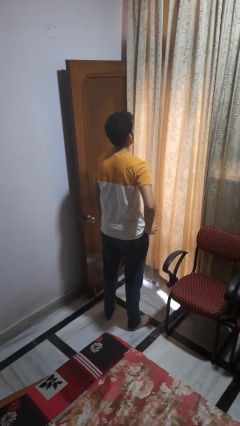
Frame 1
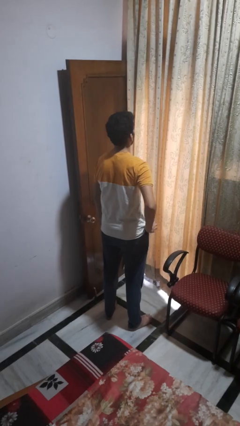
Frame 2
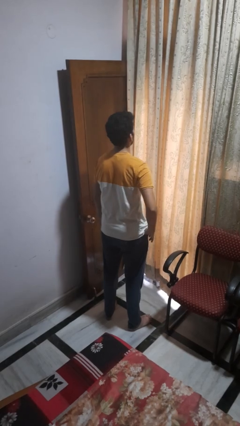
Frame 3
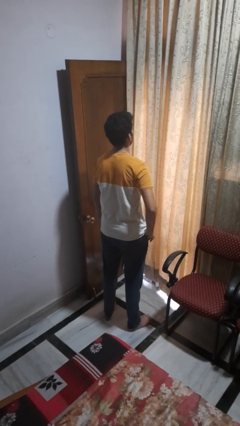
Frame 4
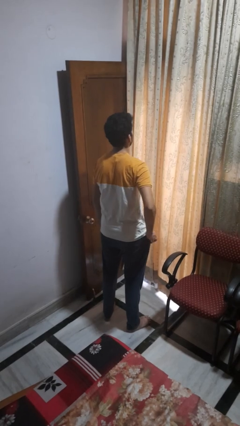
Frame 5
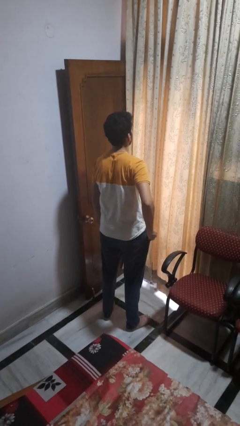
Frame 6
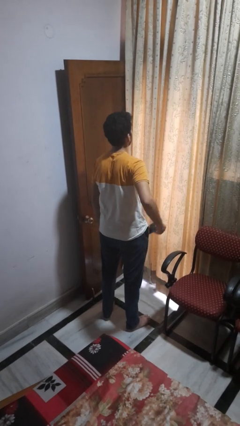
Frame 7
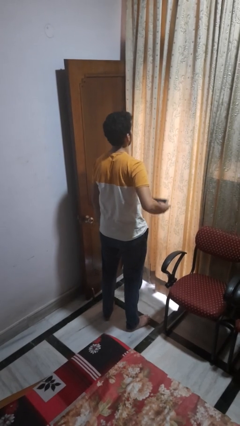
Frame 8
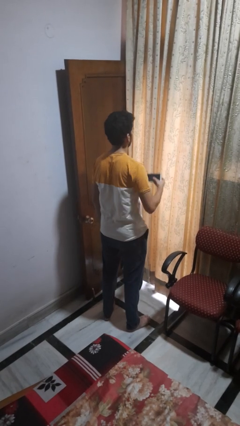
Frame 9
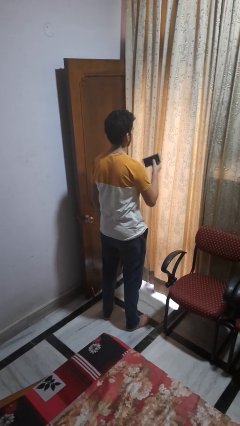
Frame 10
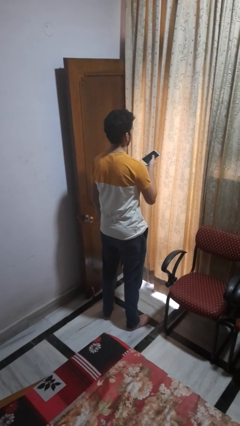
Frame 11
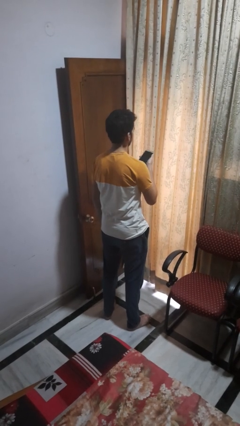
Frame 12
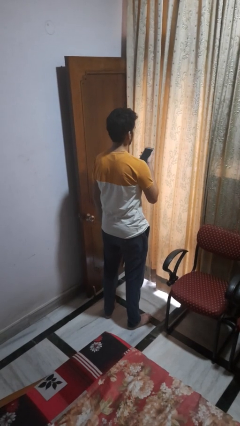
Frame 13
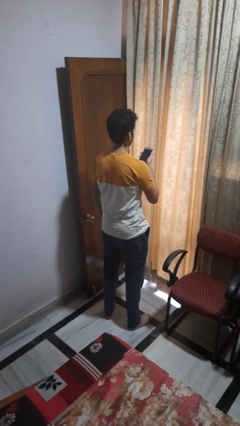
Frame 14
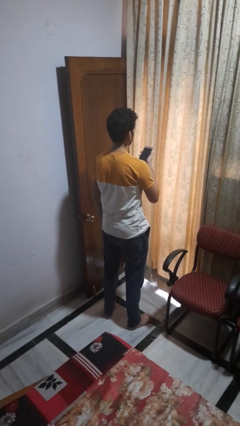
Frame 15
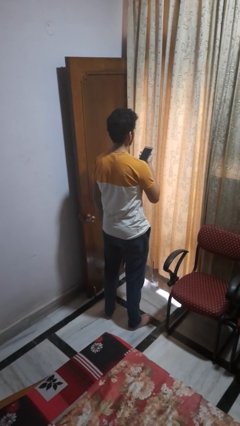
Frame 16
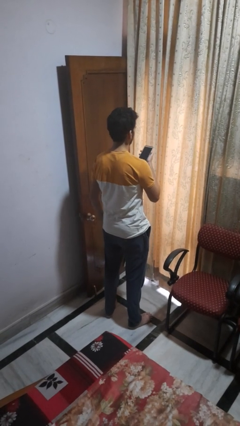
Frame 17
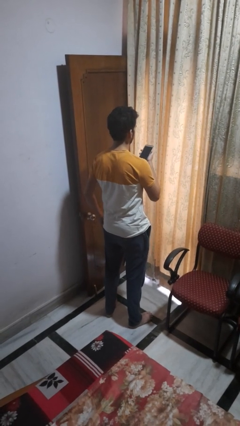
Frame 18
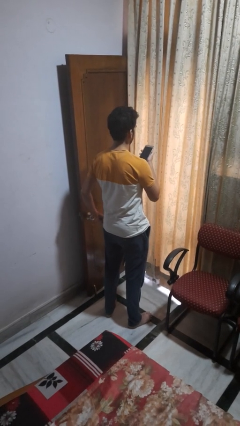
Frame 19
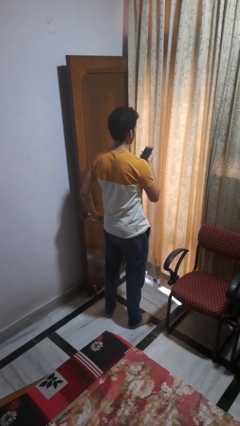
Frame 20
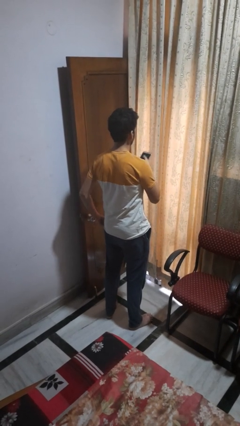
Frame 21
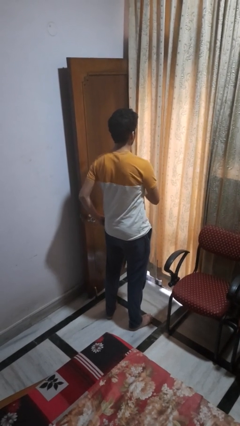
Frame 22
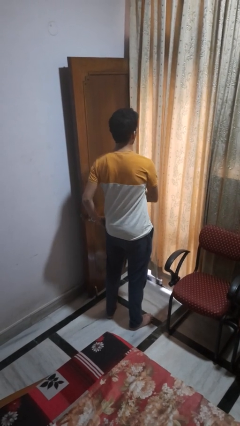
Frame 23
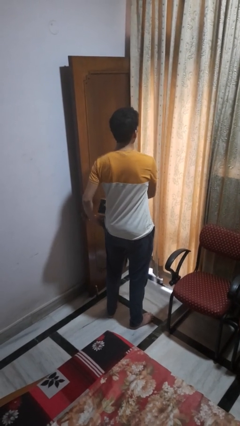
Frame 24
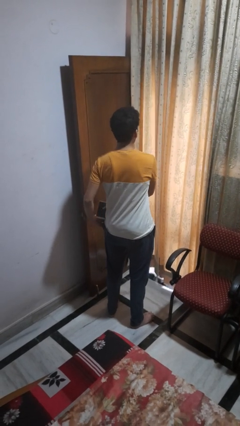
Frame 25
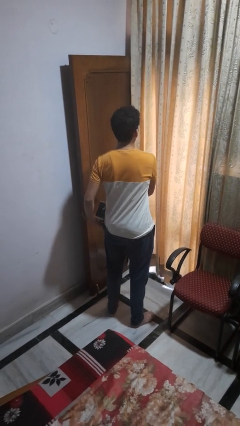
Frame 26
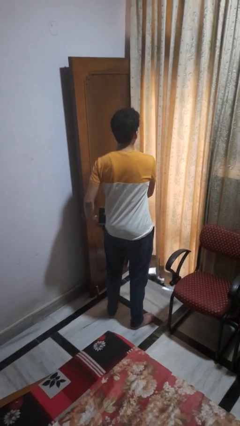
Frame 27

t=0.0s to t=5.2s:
person takes phone from pocket

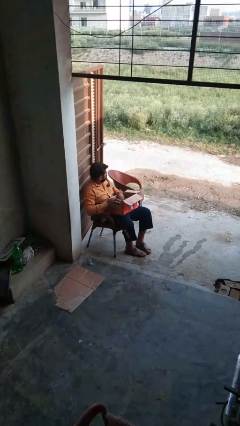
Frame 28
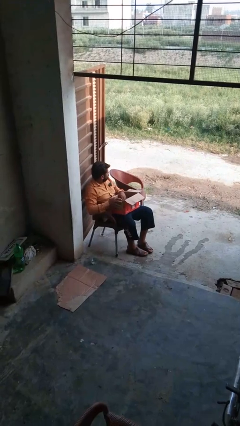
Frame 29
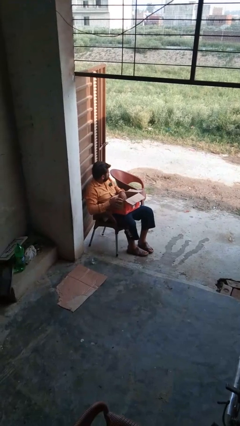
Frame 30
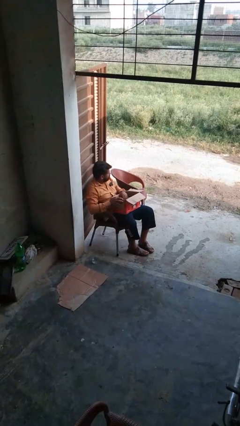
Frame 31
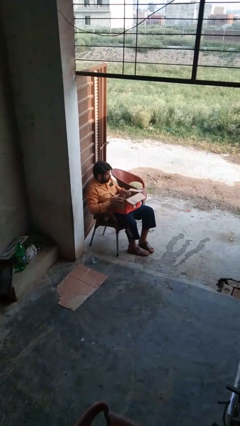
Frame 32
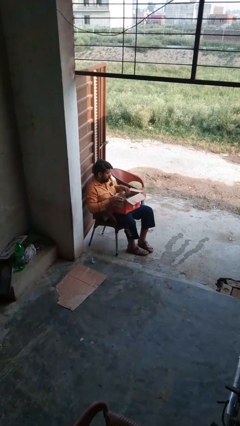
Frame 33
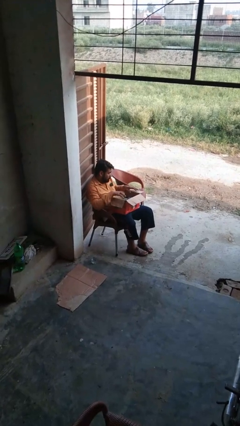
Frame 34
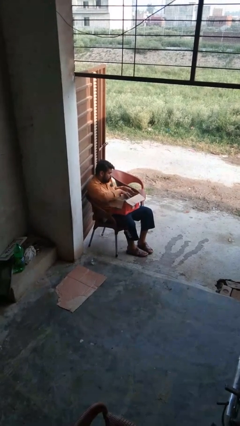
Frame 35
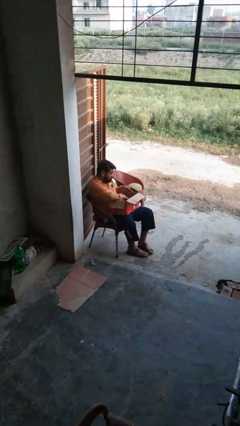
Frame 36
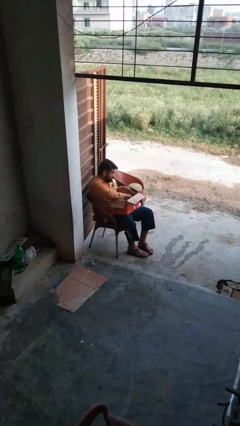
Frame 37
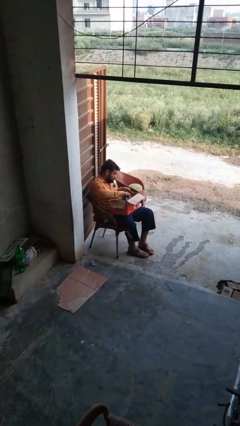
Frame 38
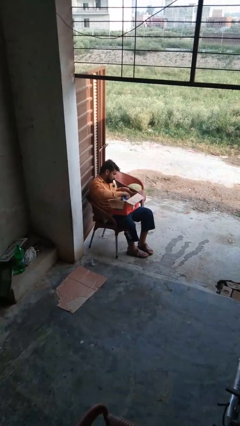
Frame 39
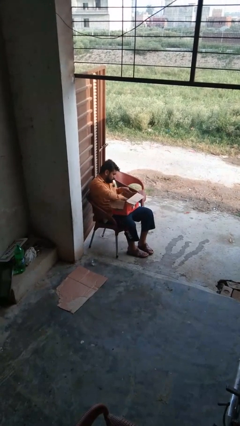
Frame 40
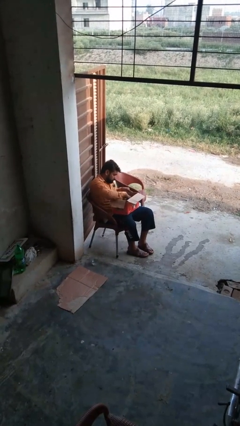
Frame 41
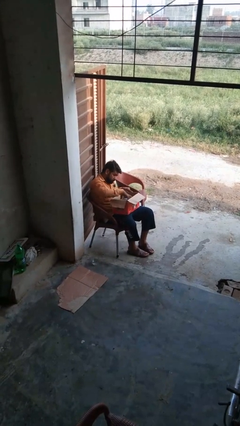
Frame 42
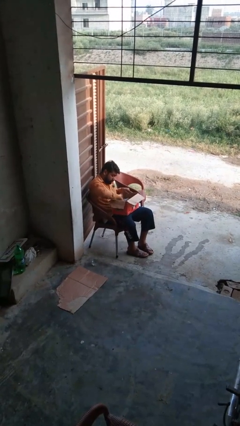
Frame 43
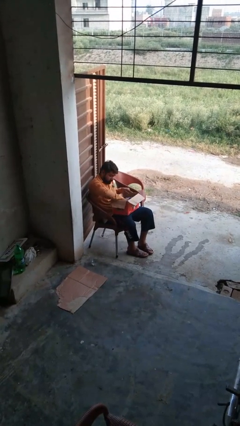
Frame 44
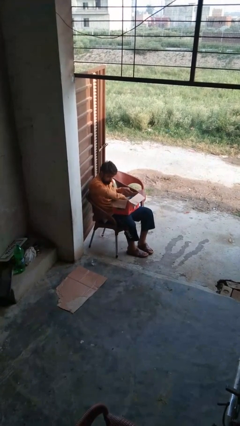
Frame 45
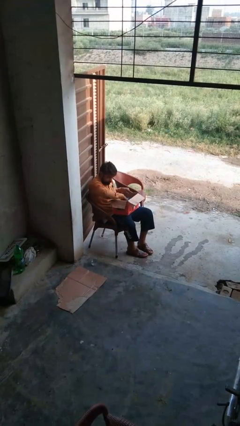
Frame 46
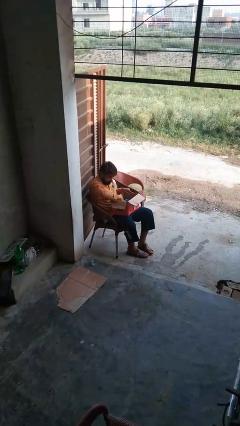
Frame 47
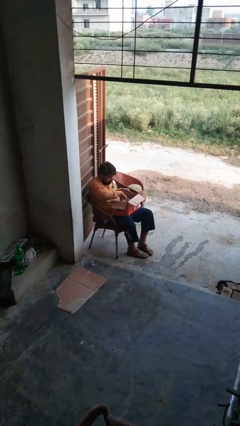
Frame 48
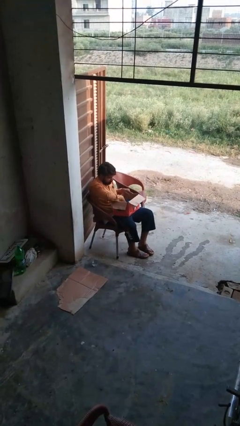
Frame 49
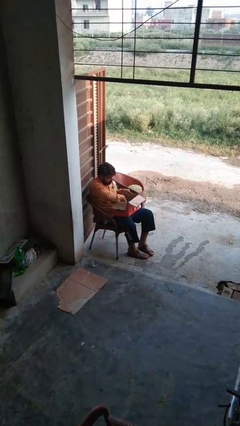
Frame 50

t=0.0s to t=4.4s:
person searches in cabinet

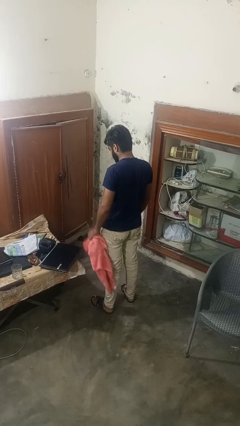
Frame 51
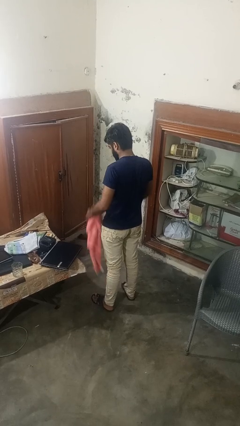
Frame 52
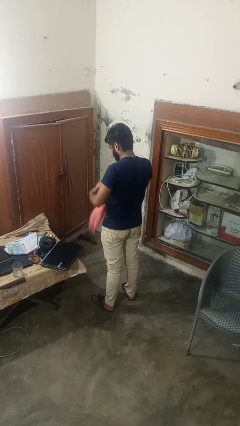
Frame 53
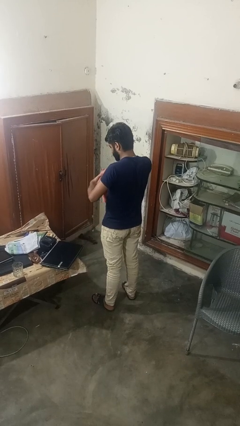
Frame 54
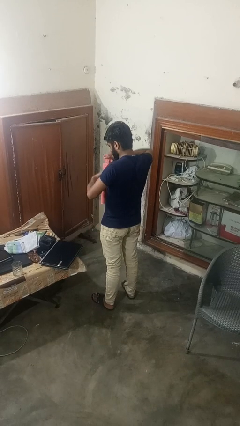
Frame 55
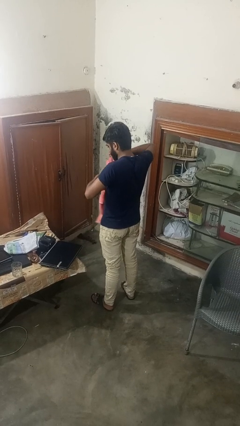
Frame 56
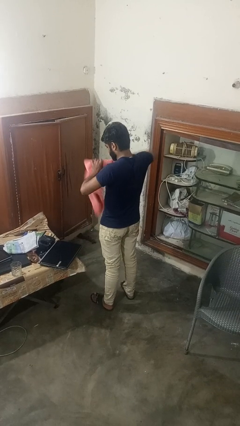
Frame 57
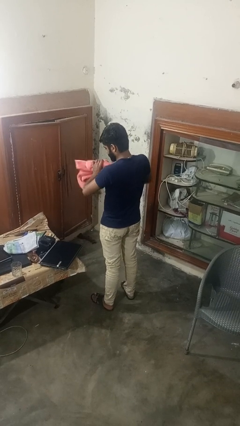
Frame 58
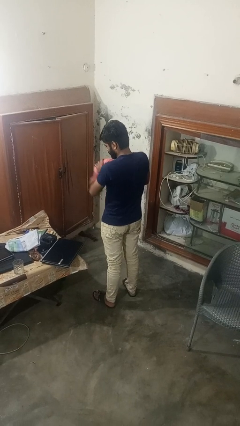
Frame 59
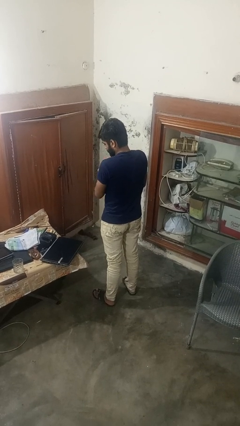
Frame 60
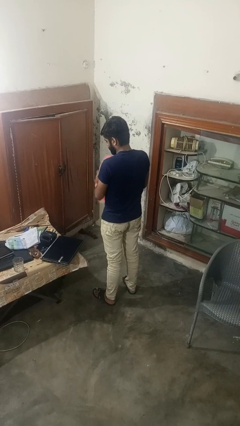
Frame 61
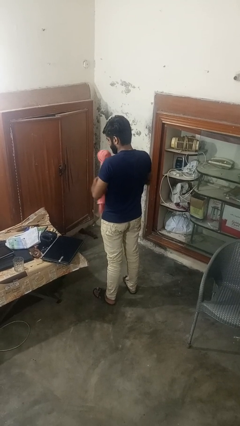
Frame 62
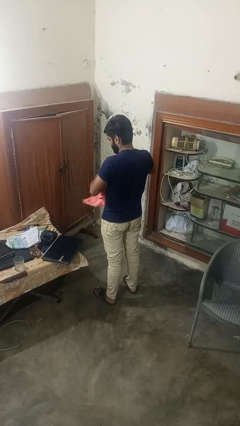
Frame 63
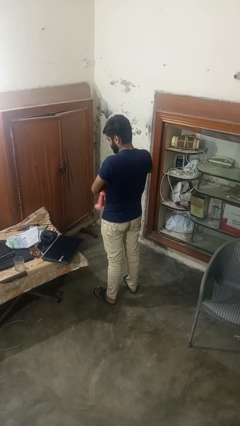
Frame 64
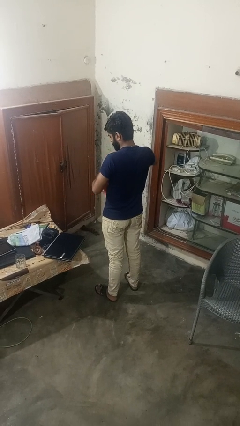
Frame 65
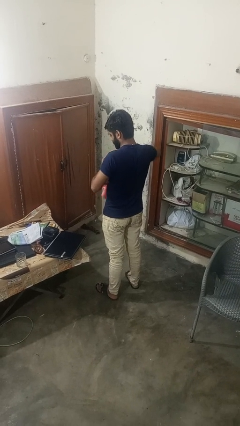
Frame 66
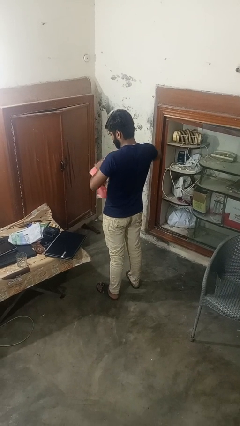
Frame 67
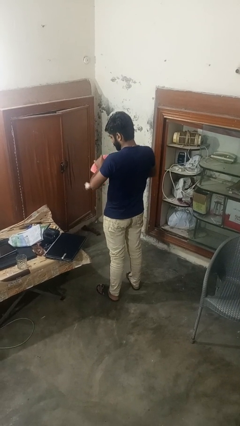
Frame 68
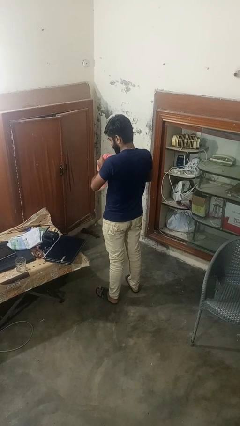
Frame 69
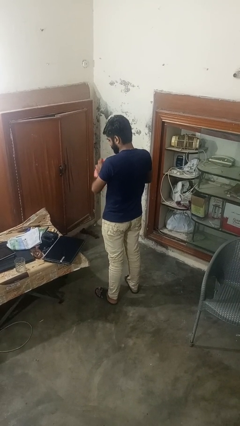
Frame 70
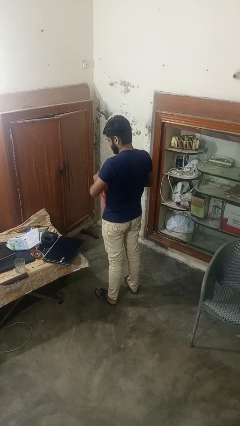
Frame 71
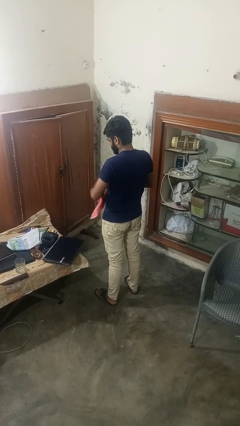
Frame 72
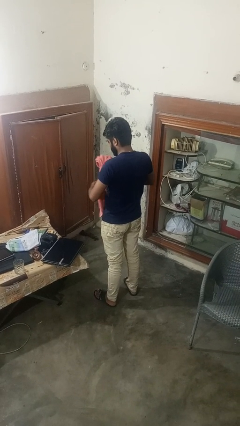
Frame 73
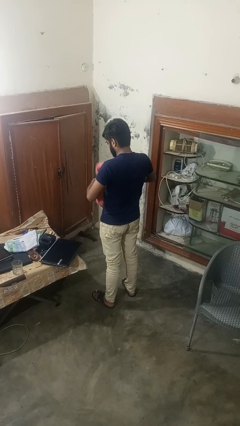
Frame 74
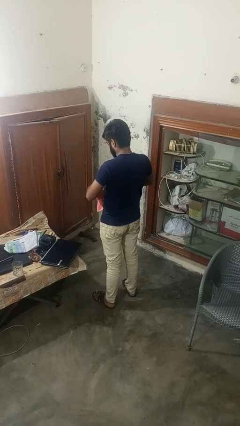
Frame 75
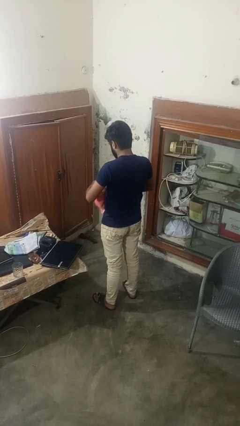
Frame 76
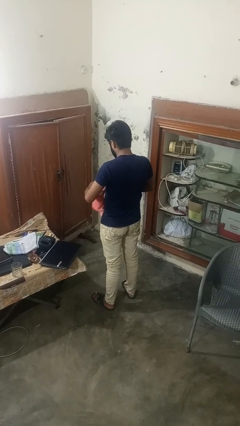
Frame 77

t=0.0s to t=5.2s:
person squeezes object

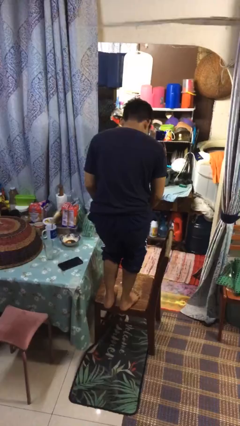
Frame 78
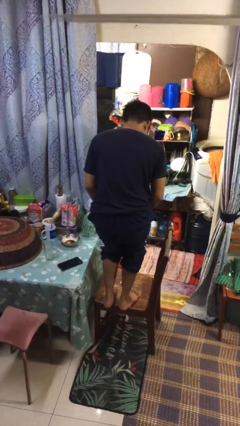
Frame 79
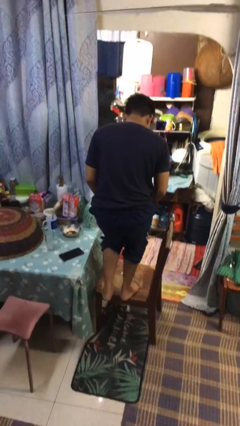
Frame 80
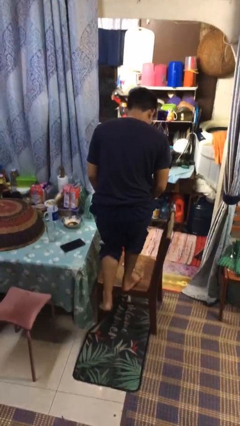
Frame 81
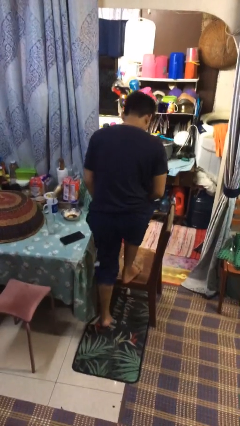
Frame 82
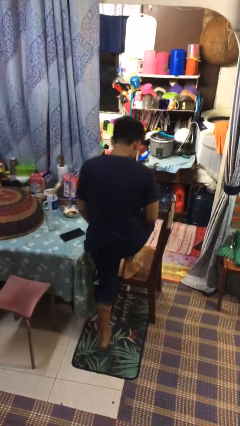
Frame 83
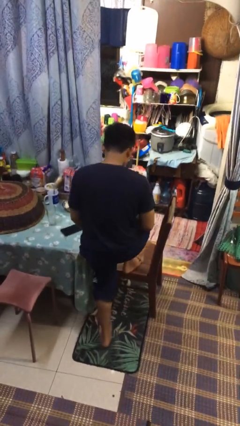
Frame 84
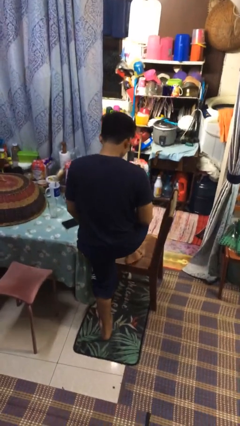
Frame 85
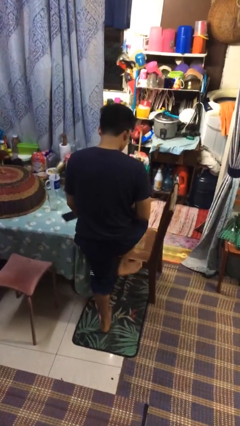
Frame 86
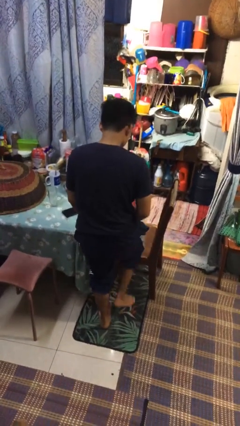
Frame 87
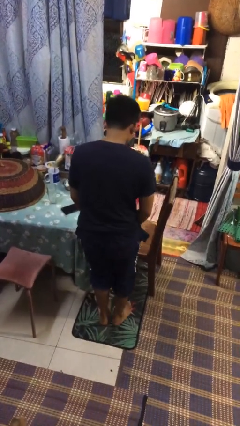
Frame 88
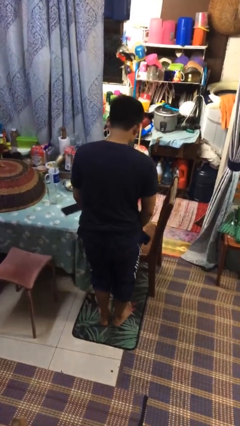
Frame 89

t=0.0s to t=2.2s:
person climbs off chair

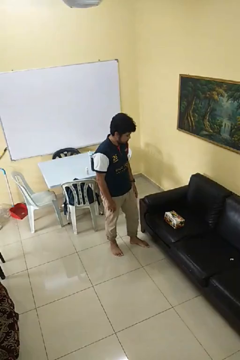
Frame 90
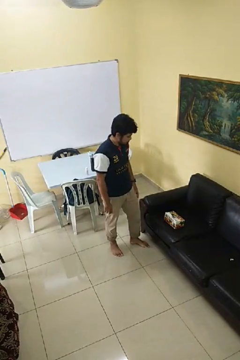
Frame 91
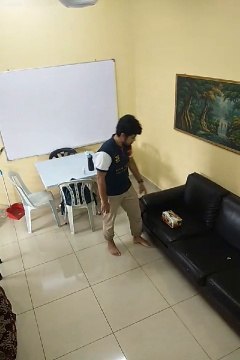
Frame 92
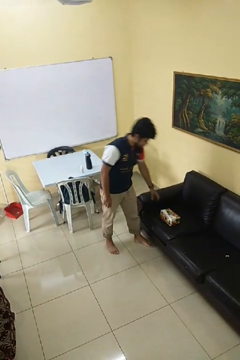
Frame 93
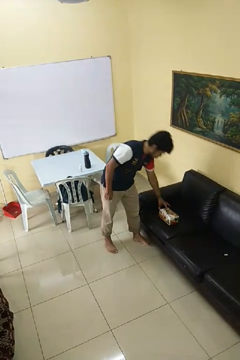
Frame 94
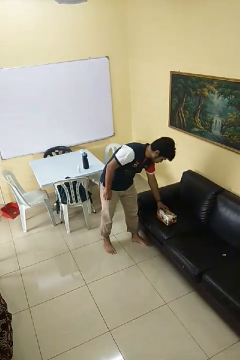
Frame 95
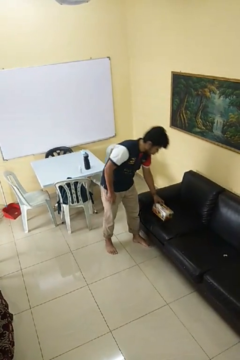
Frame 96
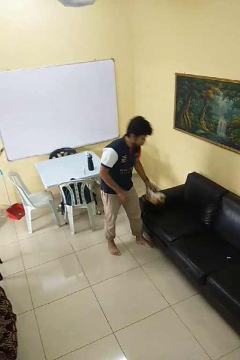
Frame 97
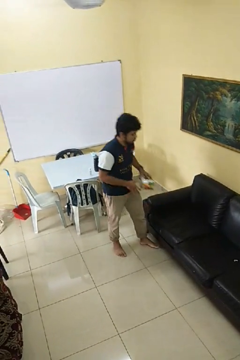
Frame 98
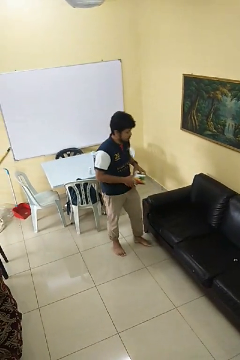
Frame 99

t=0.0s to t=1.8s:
person picks up object from couch
